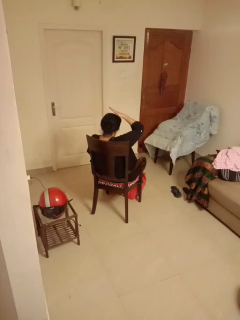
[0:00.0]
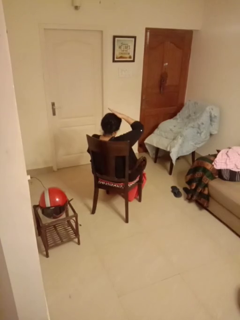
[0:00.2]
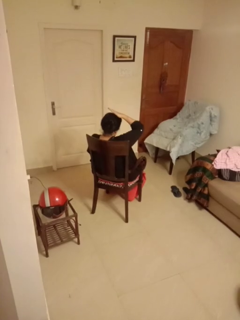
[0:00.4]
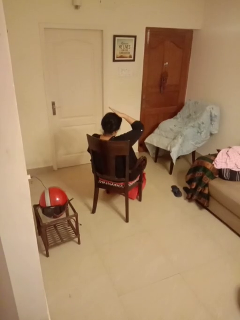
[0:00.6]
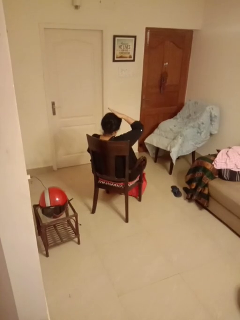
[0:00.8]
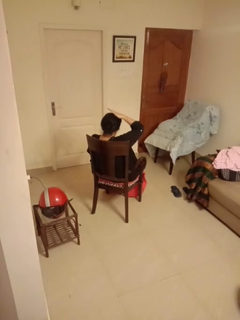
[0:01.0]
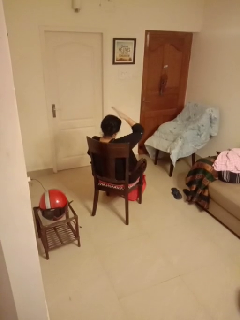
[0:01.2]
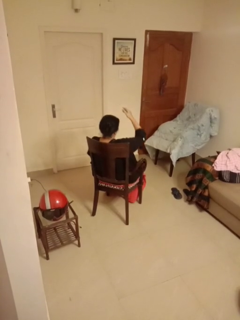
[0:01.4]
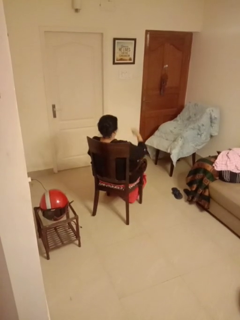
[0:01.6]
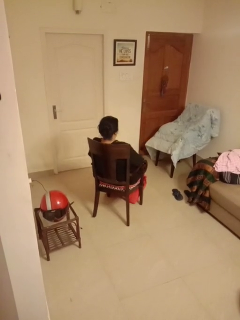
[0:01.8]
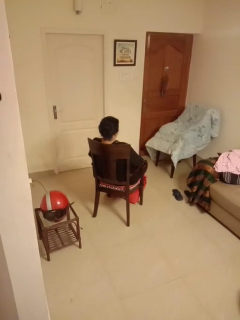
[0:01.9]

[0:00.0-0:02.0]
person pats head

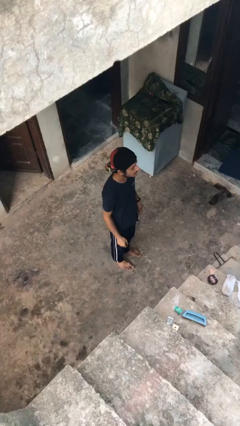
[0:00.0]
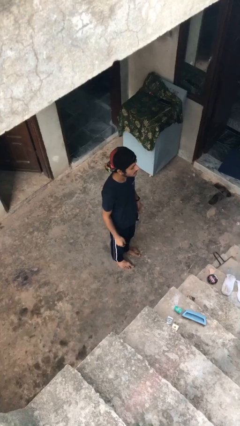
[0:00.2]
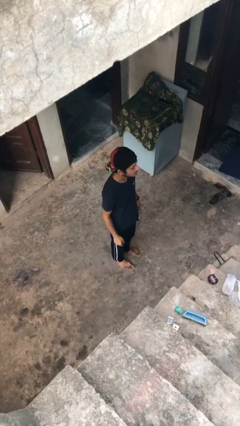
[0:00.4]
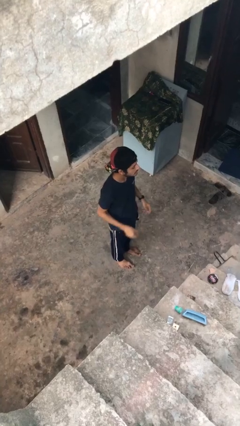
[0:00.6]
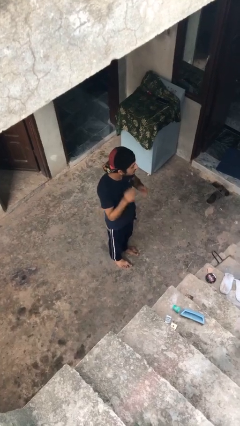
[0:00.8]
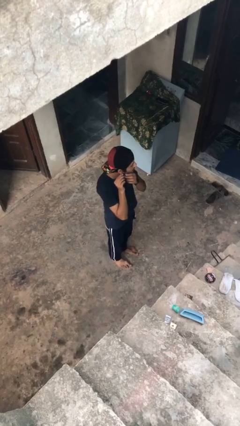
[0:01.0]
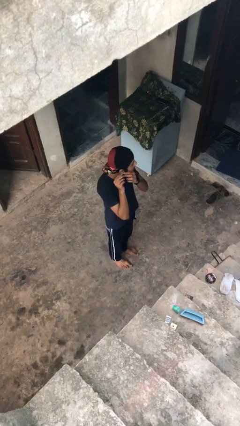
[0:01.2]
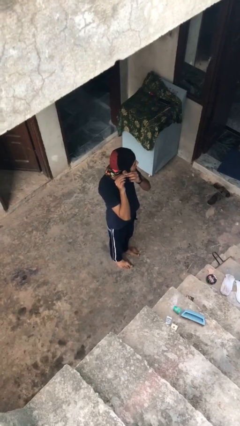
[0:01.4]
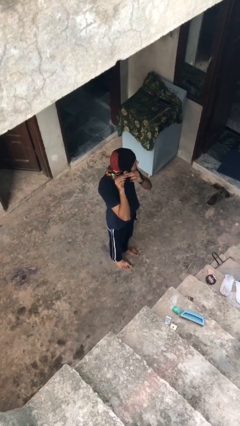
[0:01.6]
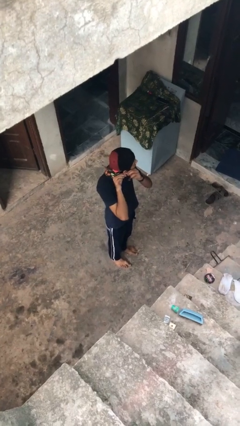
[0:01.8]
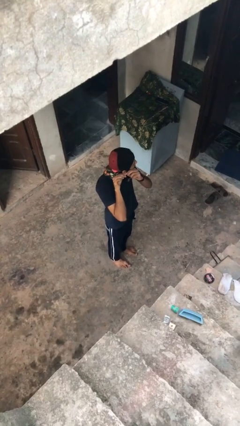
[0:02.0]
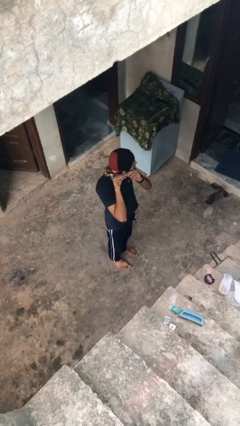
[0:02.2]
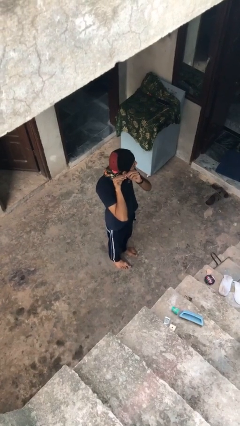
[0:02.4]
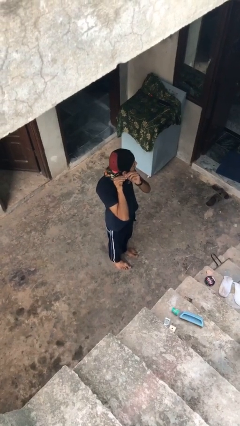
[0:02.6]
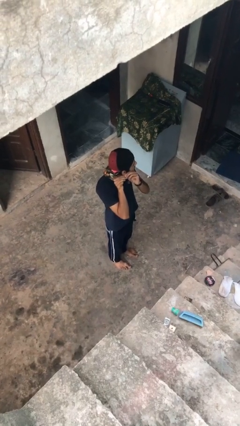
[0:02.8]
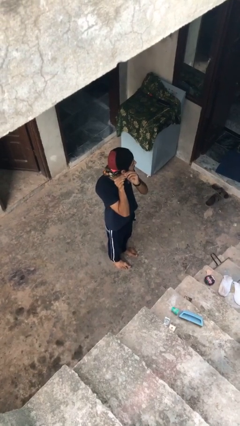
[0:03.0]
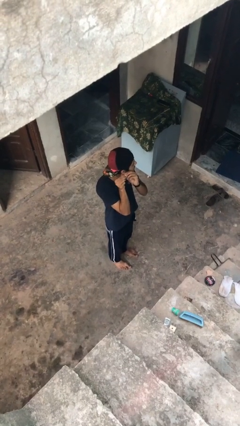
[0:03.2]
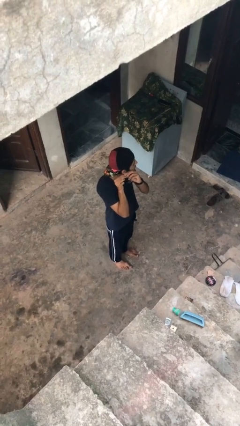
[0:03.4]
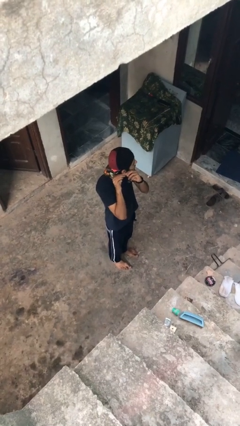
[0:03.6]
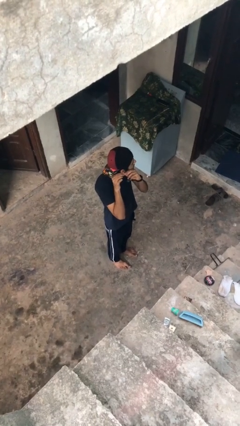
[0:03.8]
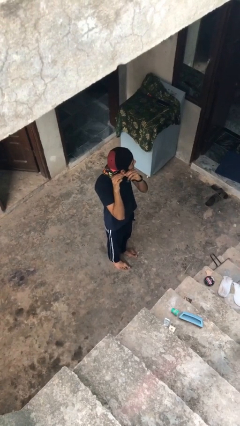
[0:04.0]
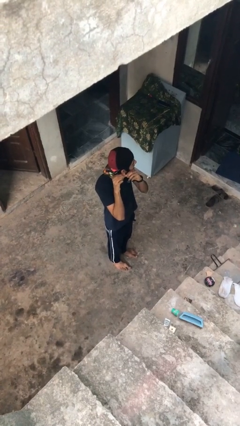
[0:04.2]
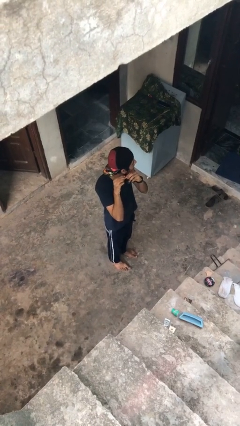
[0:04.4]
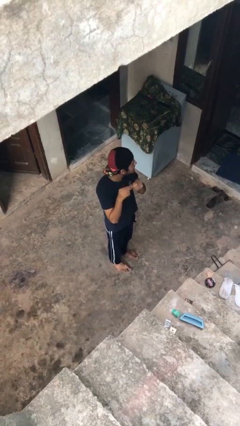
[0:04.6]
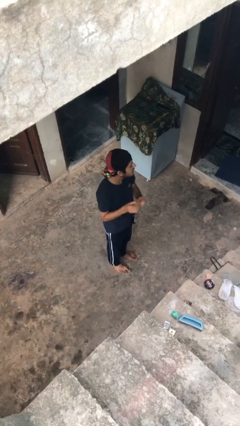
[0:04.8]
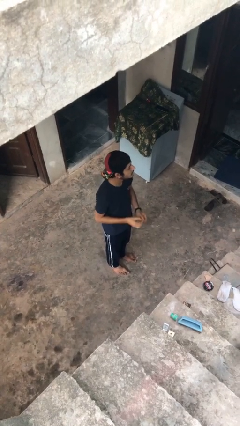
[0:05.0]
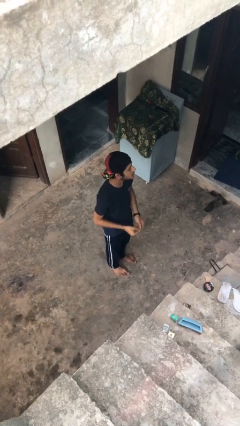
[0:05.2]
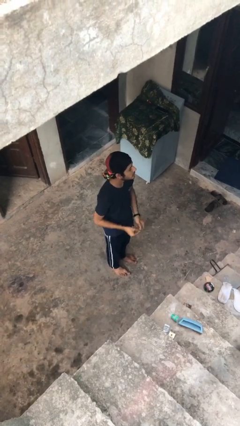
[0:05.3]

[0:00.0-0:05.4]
person takes off earrings

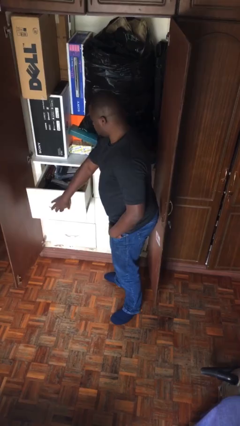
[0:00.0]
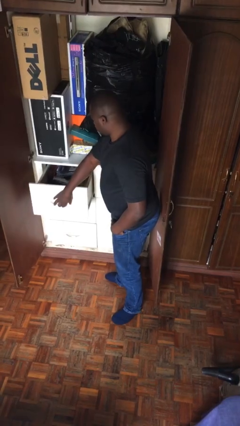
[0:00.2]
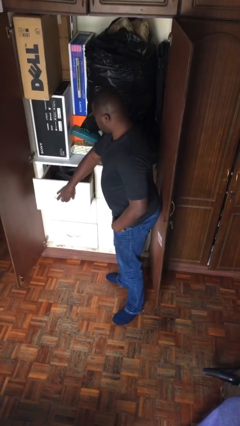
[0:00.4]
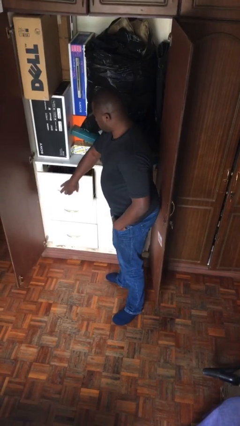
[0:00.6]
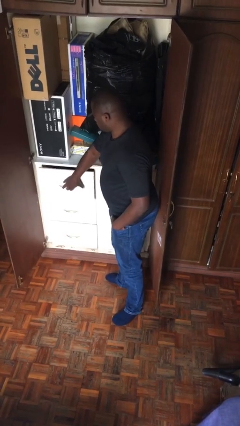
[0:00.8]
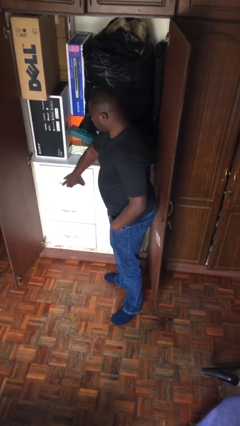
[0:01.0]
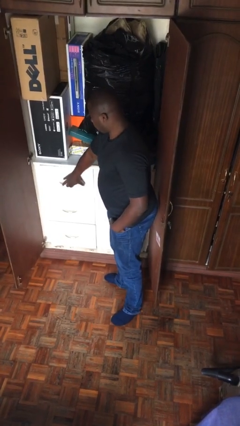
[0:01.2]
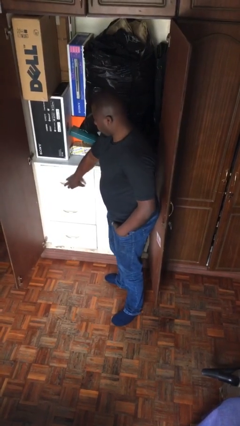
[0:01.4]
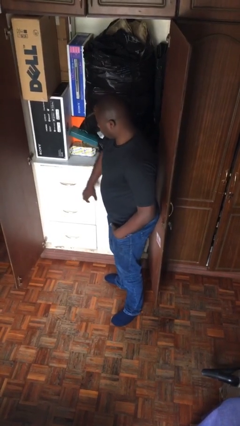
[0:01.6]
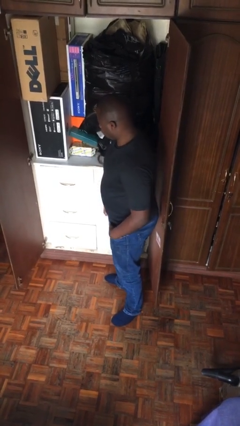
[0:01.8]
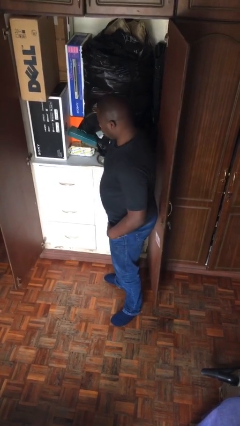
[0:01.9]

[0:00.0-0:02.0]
person closes dresser drawer

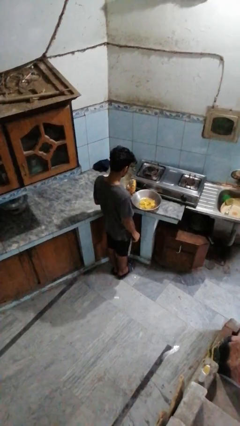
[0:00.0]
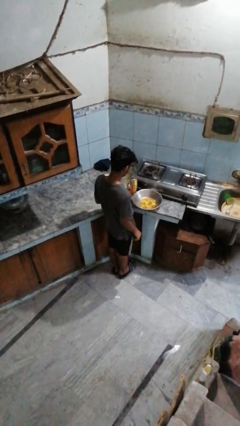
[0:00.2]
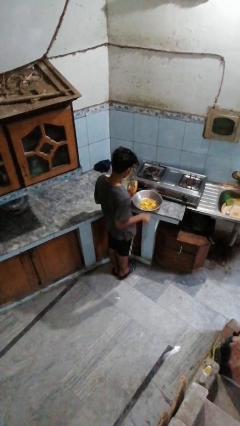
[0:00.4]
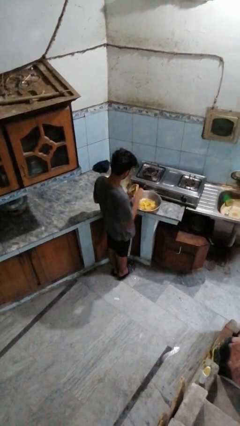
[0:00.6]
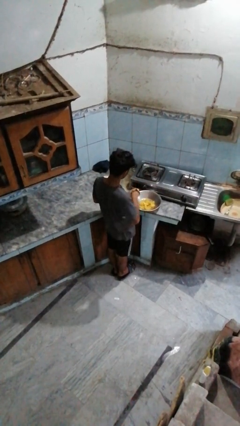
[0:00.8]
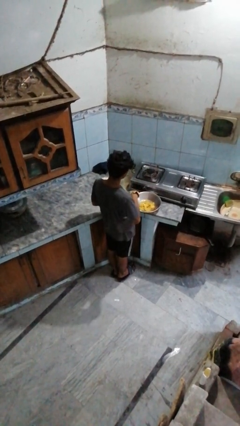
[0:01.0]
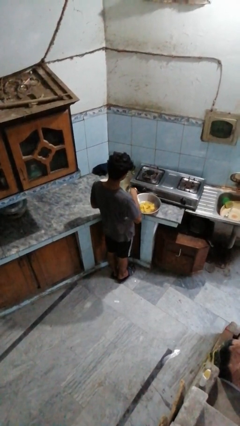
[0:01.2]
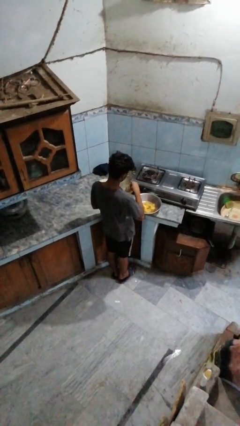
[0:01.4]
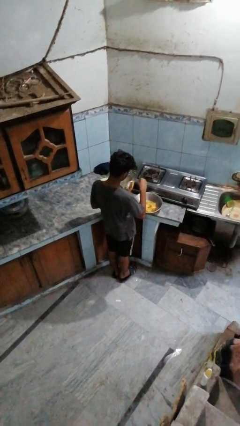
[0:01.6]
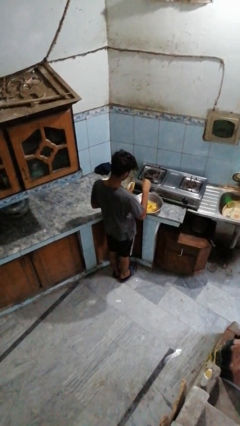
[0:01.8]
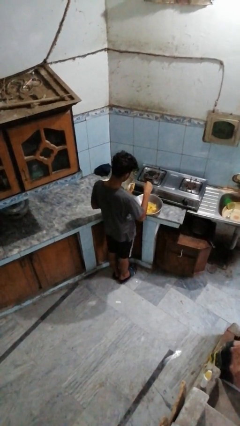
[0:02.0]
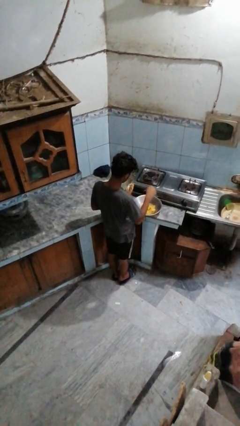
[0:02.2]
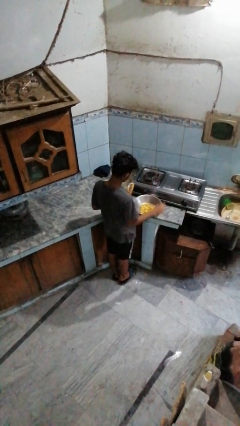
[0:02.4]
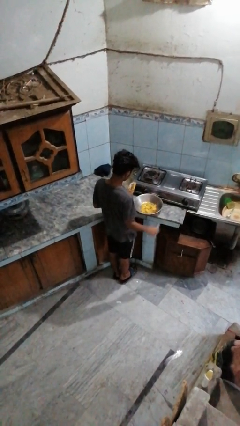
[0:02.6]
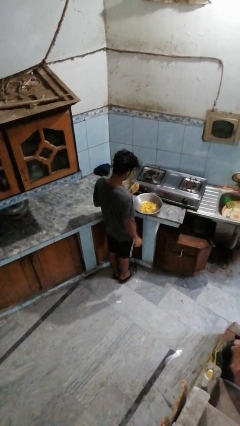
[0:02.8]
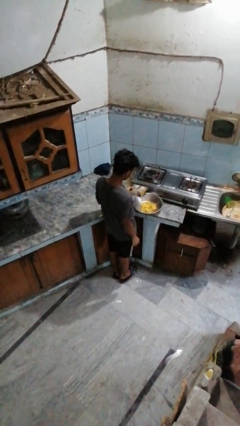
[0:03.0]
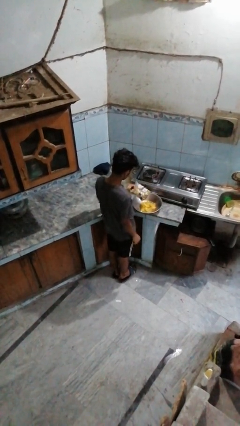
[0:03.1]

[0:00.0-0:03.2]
person pours into bowl

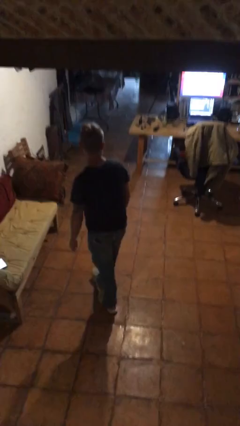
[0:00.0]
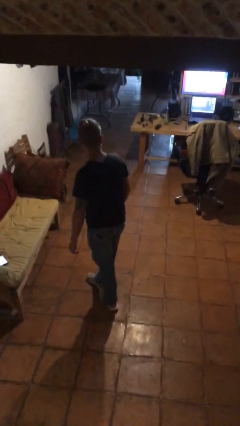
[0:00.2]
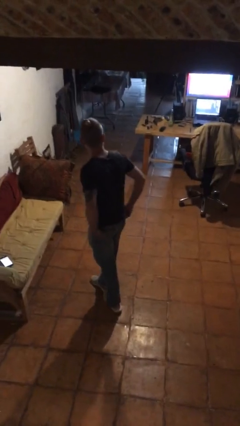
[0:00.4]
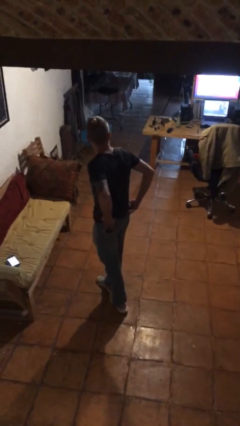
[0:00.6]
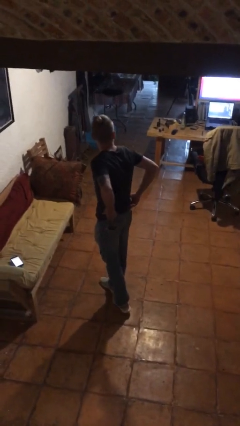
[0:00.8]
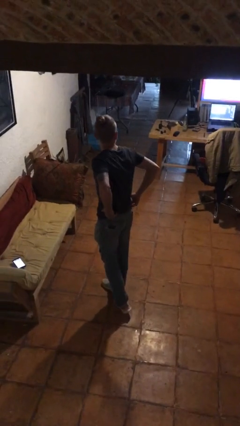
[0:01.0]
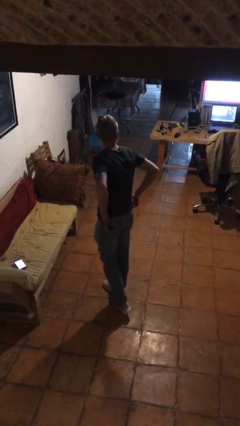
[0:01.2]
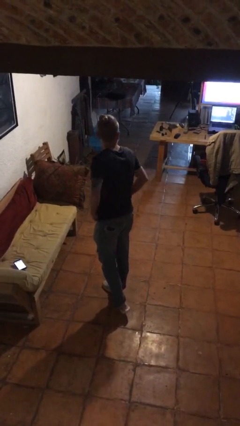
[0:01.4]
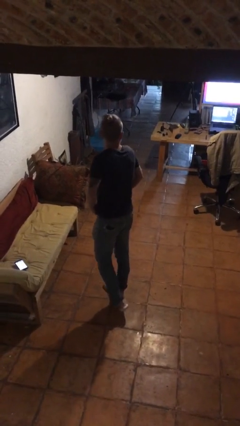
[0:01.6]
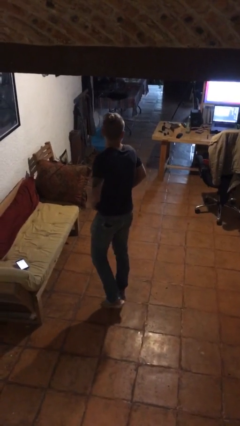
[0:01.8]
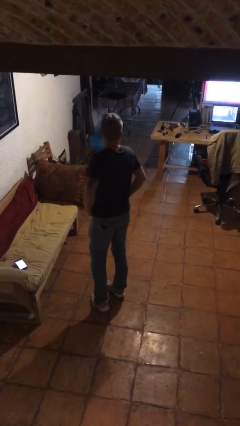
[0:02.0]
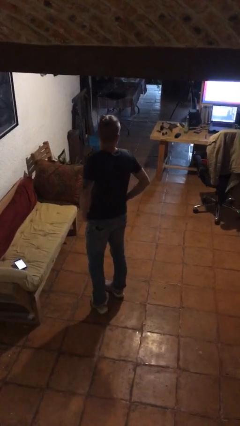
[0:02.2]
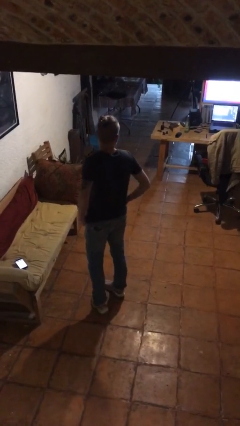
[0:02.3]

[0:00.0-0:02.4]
person hikes up pants

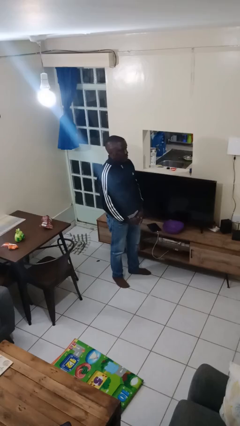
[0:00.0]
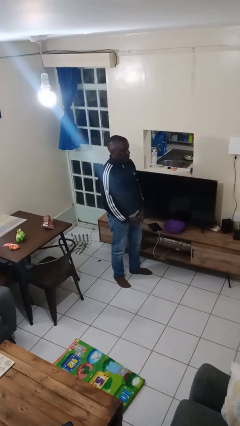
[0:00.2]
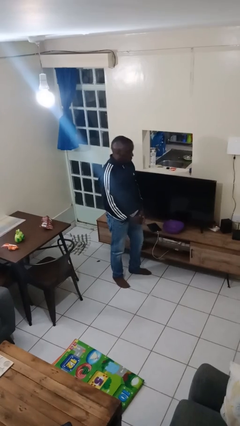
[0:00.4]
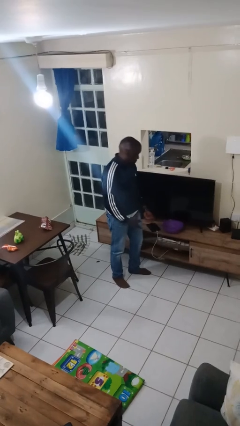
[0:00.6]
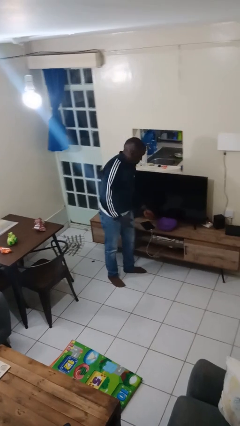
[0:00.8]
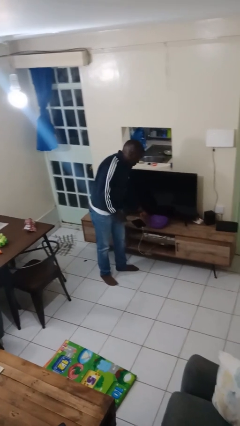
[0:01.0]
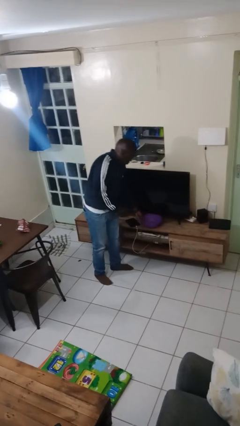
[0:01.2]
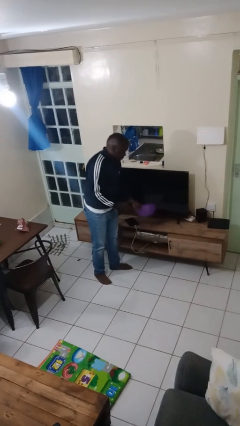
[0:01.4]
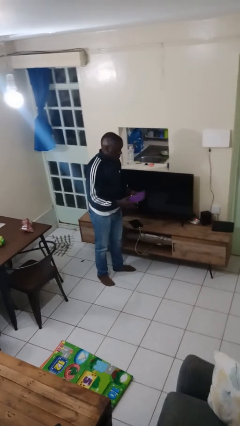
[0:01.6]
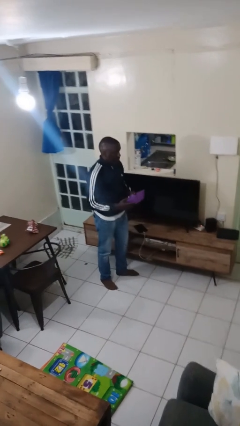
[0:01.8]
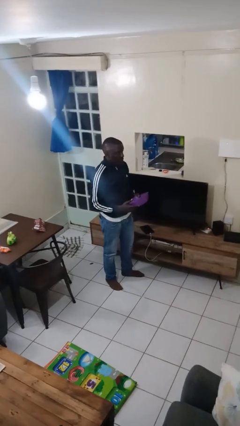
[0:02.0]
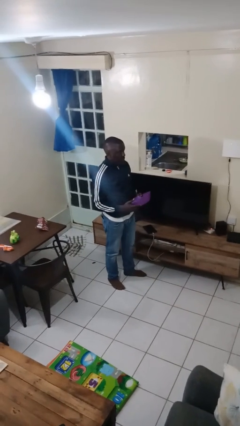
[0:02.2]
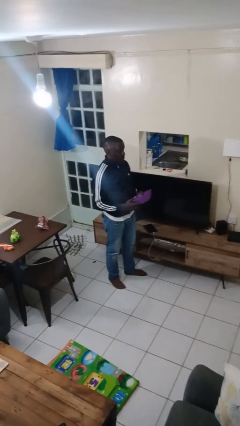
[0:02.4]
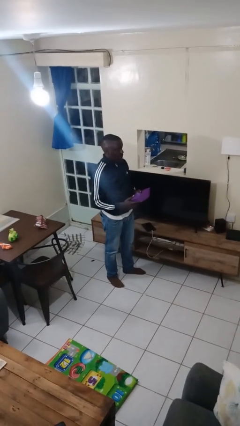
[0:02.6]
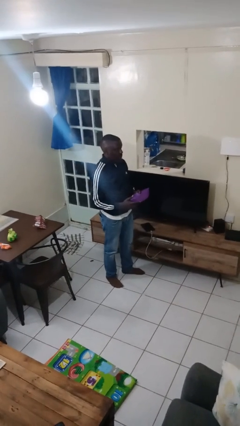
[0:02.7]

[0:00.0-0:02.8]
person picks up object from countertop
